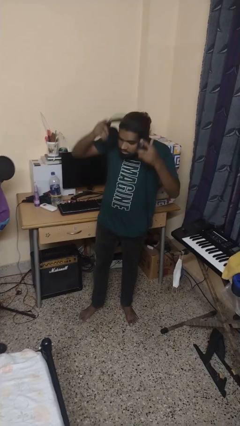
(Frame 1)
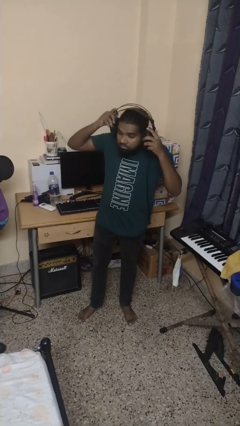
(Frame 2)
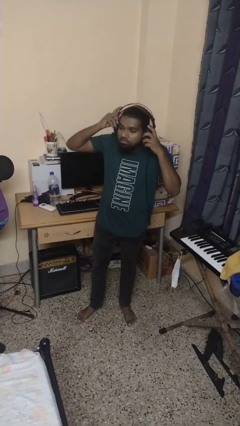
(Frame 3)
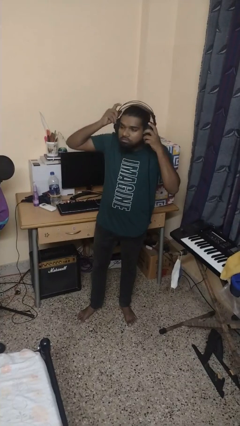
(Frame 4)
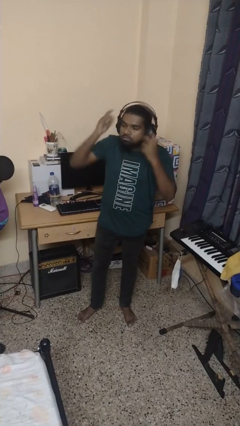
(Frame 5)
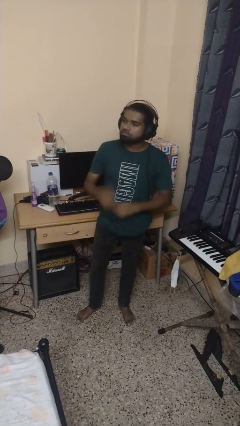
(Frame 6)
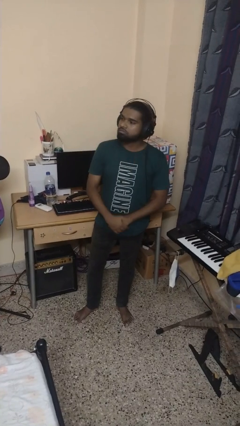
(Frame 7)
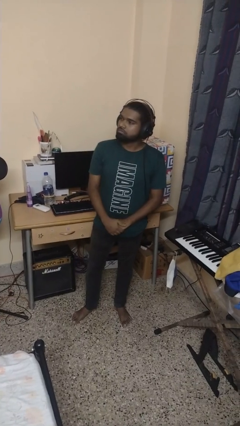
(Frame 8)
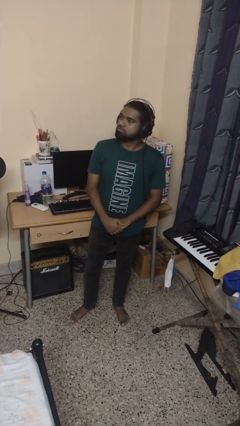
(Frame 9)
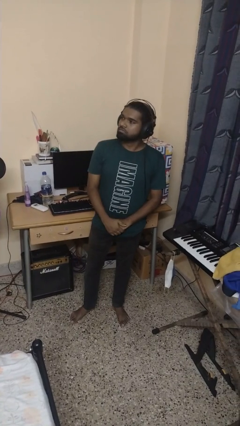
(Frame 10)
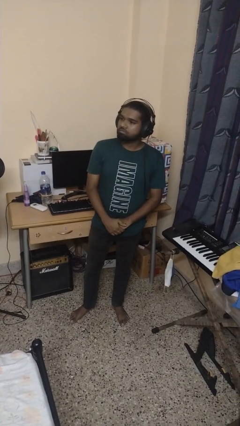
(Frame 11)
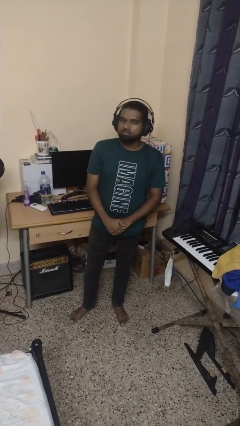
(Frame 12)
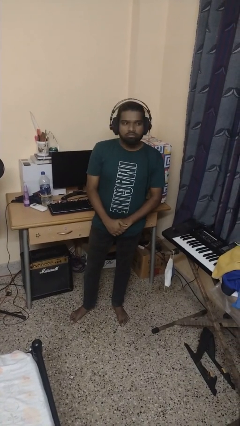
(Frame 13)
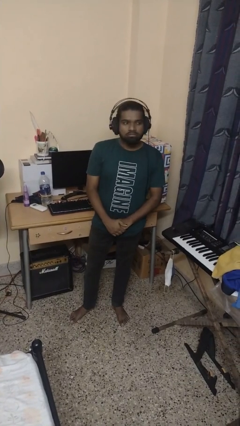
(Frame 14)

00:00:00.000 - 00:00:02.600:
person puts on headphones

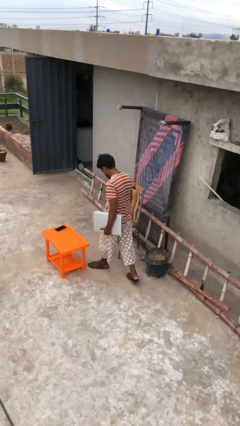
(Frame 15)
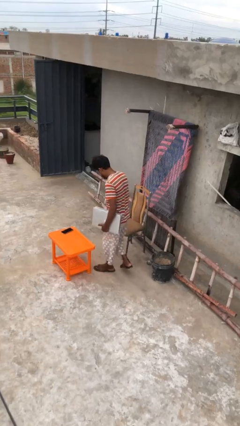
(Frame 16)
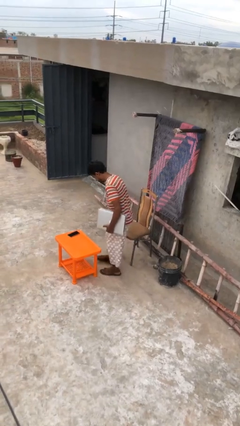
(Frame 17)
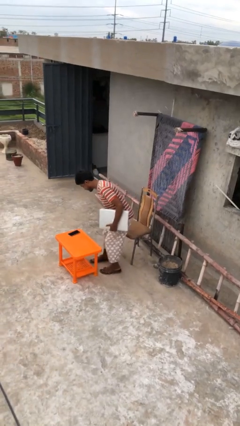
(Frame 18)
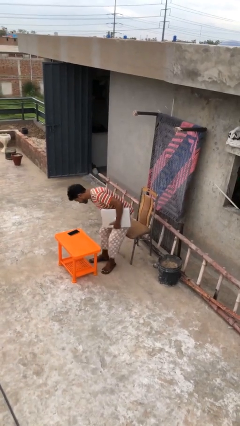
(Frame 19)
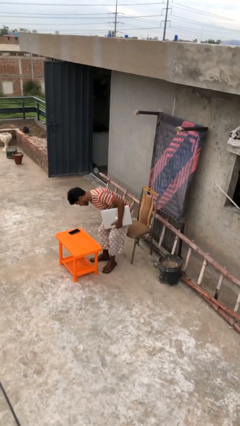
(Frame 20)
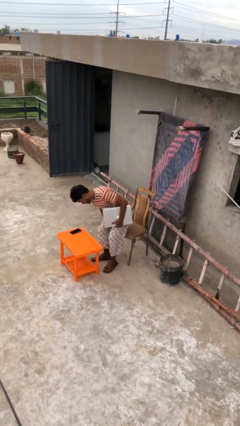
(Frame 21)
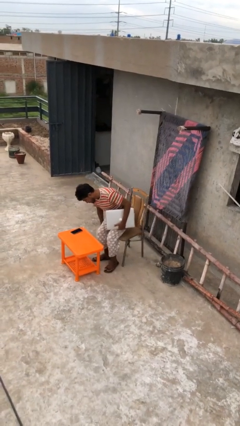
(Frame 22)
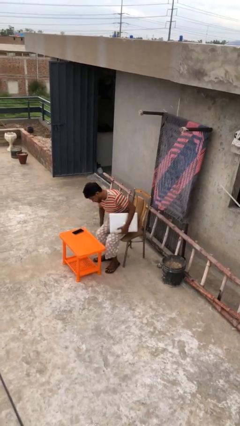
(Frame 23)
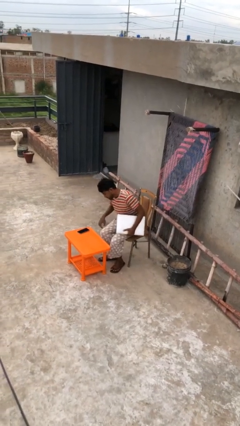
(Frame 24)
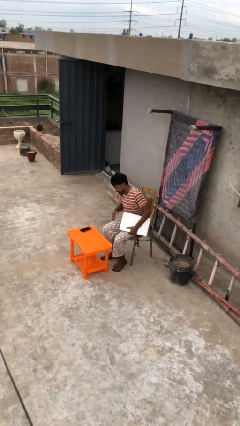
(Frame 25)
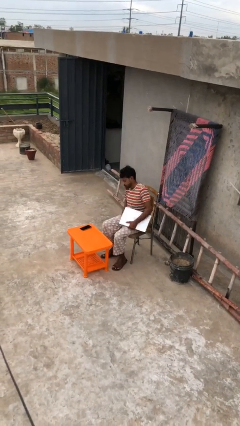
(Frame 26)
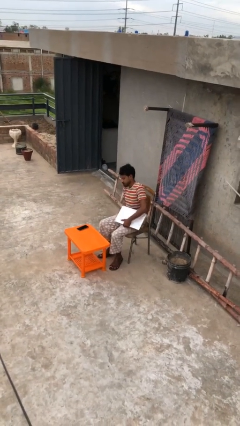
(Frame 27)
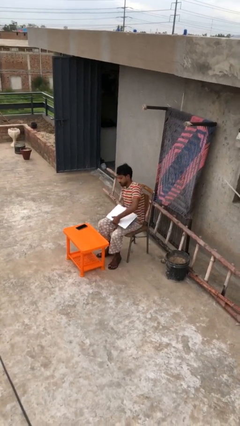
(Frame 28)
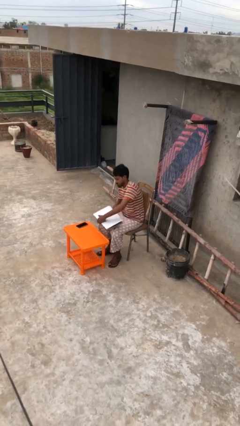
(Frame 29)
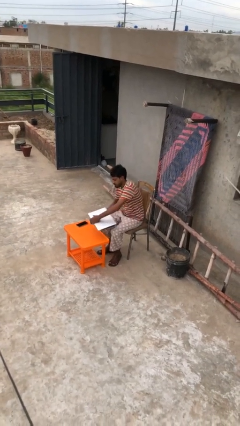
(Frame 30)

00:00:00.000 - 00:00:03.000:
person sits down

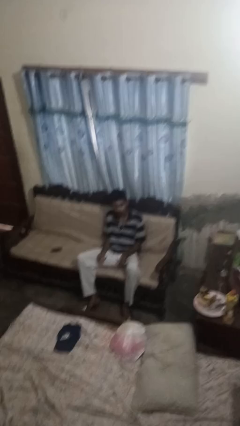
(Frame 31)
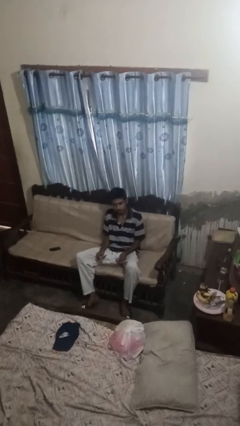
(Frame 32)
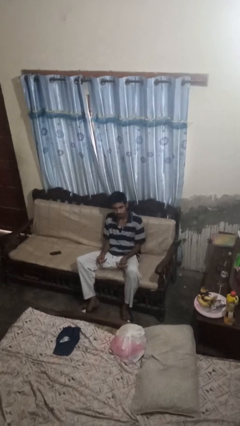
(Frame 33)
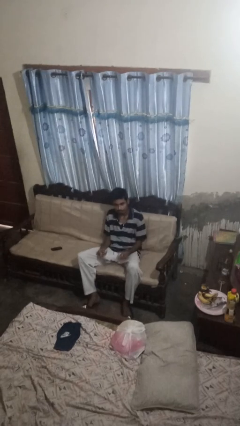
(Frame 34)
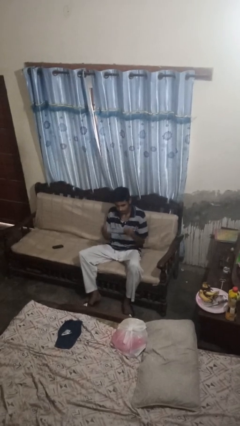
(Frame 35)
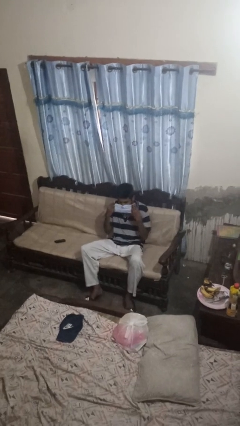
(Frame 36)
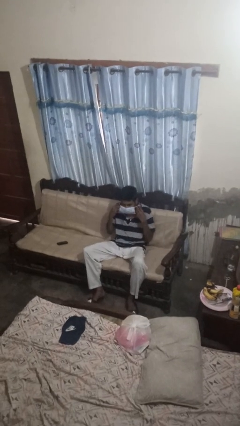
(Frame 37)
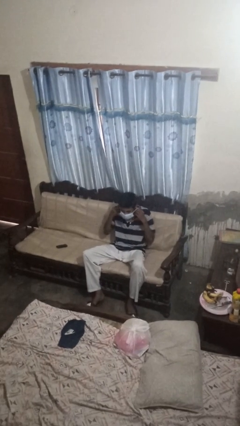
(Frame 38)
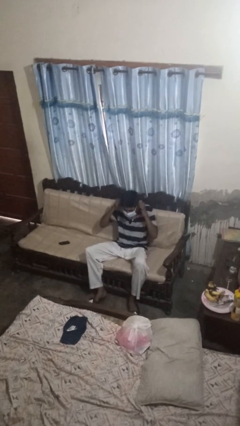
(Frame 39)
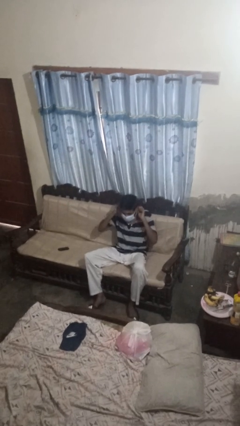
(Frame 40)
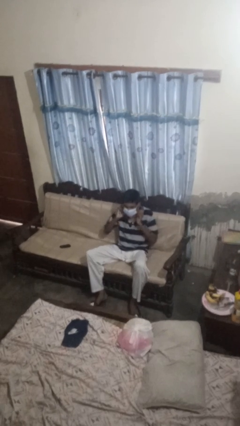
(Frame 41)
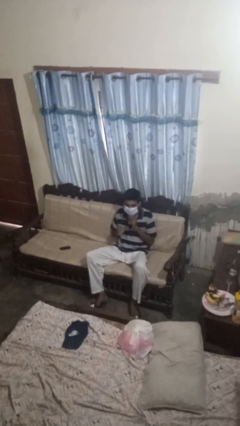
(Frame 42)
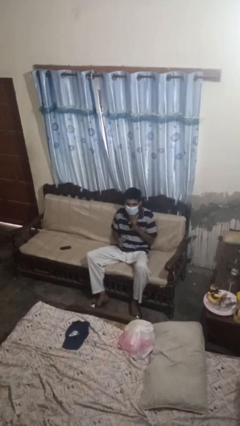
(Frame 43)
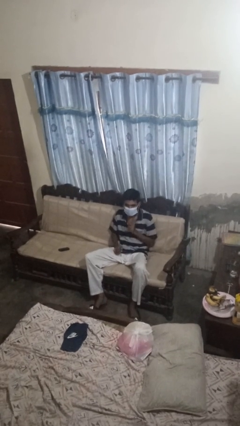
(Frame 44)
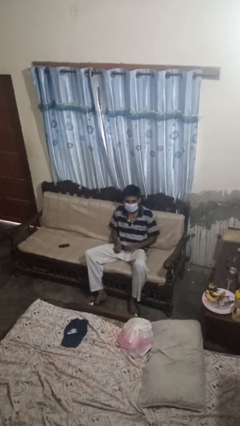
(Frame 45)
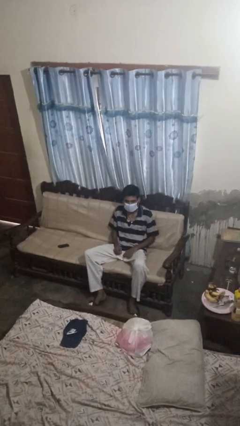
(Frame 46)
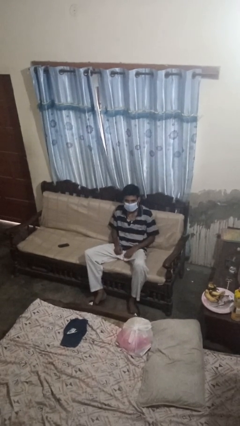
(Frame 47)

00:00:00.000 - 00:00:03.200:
person puts on facemask

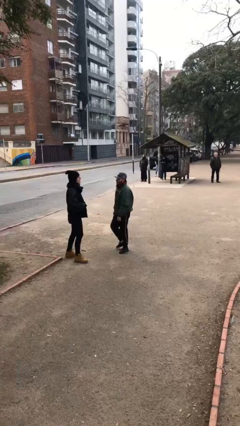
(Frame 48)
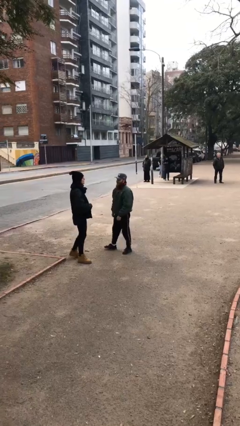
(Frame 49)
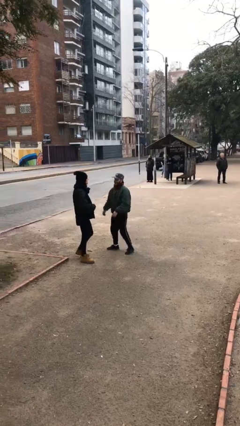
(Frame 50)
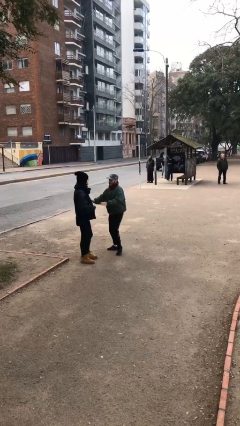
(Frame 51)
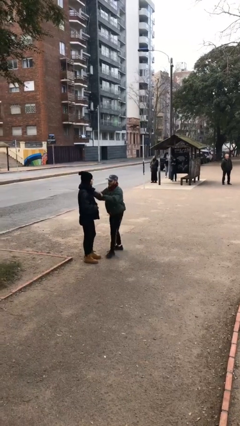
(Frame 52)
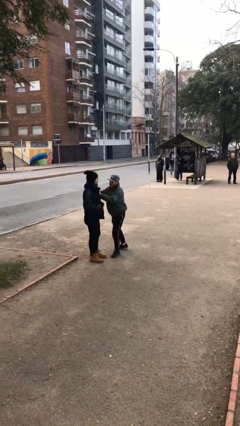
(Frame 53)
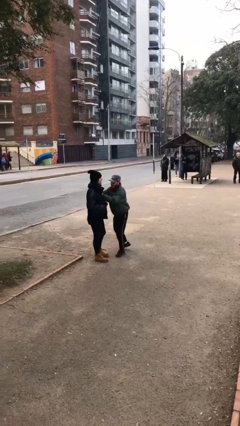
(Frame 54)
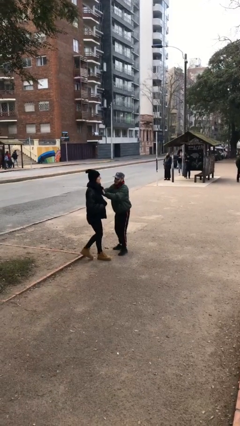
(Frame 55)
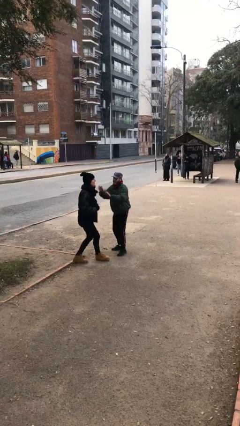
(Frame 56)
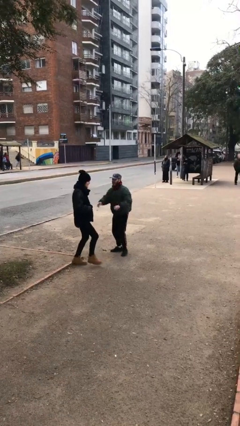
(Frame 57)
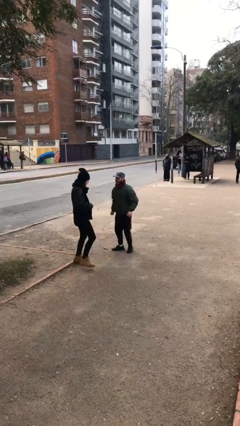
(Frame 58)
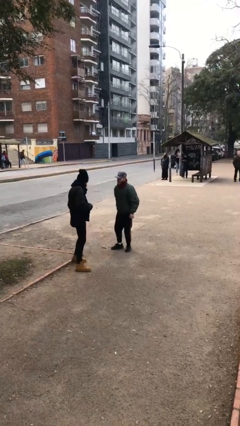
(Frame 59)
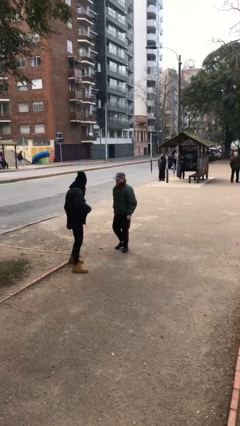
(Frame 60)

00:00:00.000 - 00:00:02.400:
person shoves person

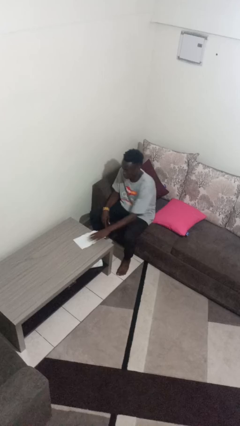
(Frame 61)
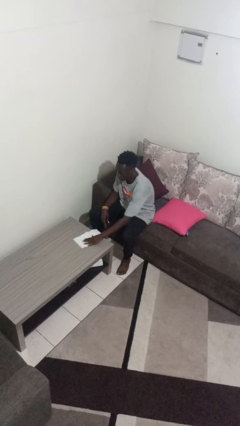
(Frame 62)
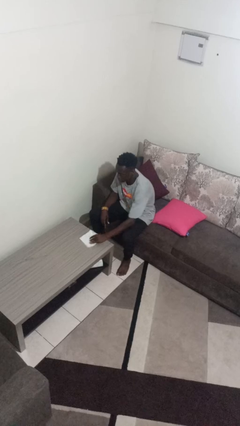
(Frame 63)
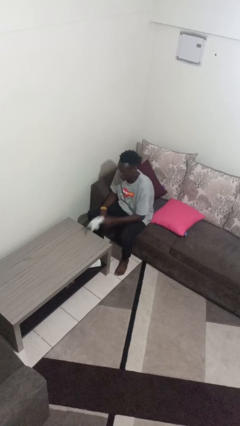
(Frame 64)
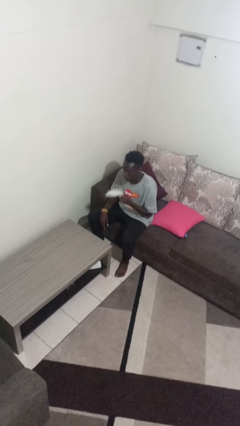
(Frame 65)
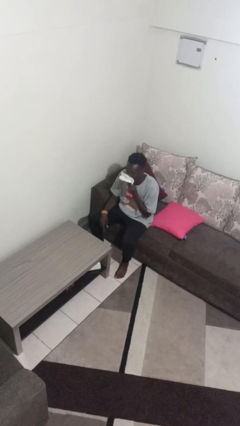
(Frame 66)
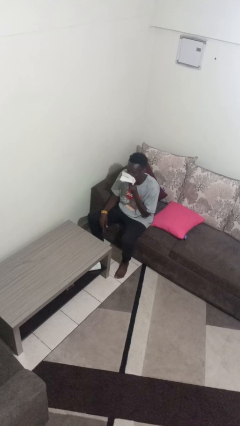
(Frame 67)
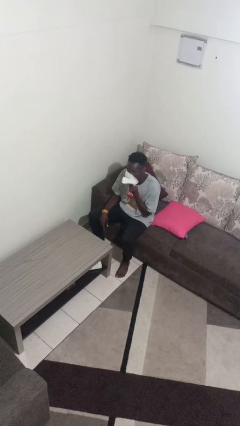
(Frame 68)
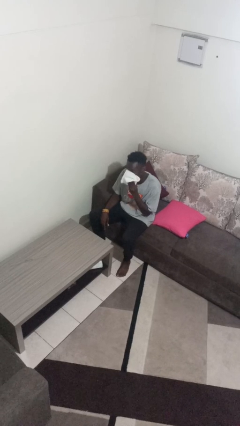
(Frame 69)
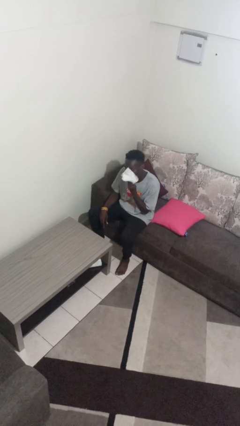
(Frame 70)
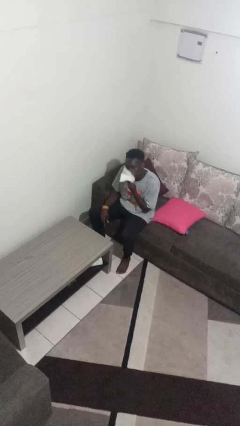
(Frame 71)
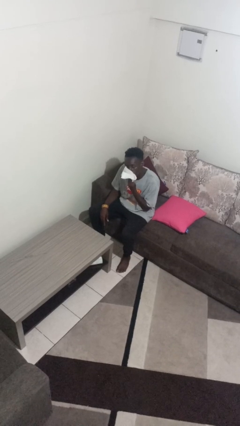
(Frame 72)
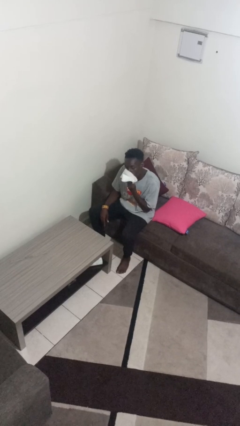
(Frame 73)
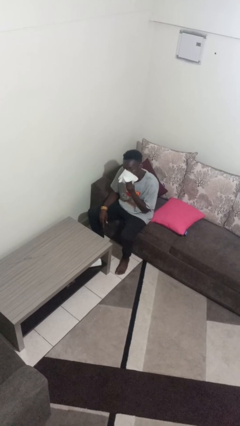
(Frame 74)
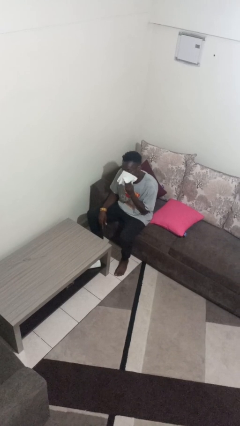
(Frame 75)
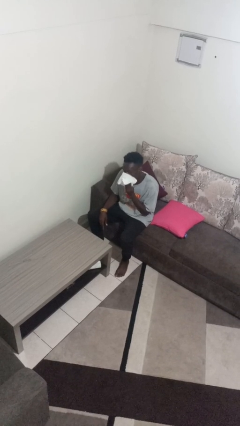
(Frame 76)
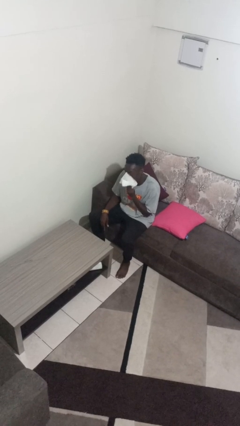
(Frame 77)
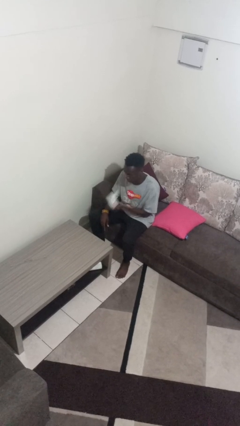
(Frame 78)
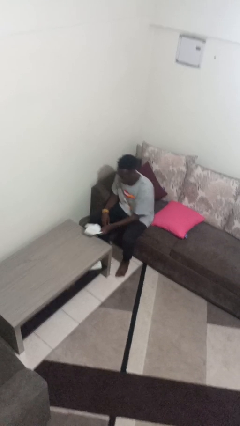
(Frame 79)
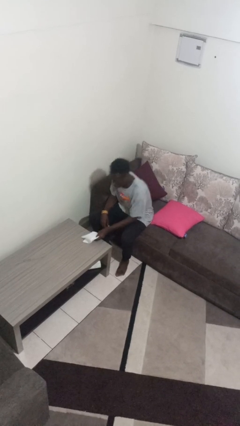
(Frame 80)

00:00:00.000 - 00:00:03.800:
person wipes mouth with napkin

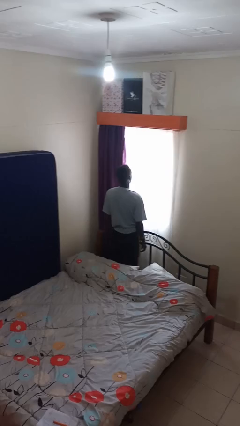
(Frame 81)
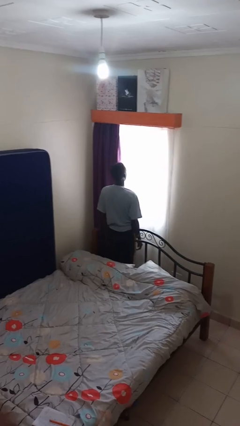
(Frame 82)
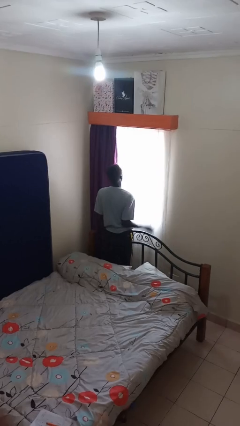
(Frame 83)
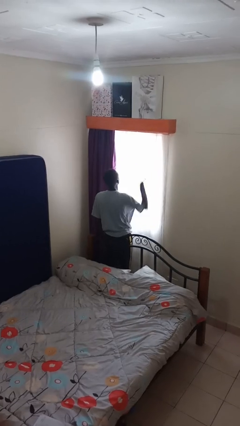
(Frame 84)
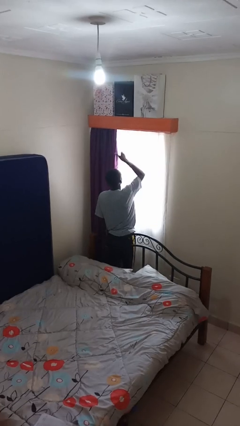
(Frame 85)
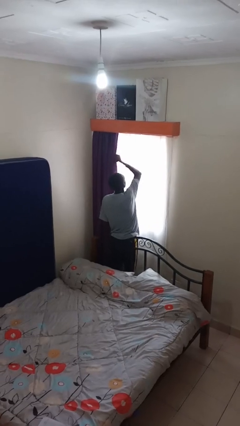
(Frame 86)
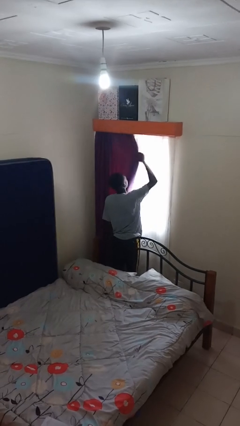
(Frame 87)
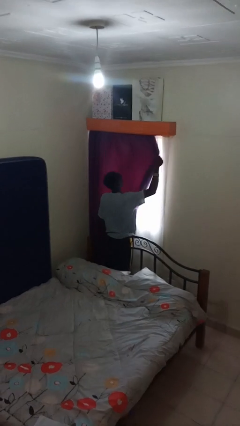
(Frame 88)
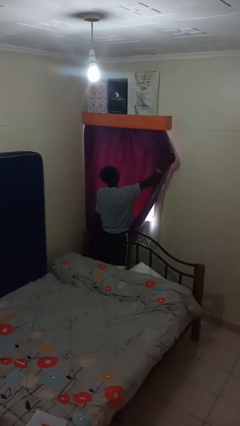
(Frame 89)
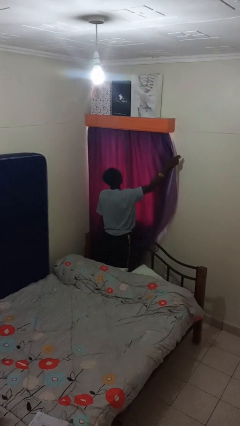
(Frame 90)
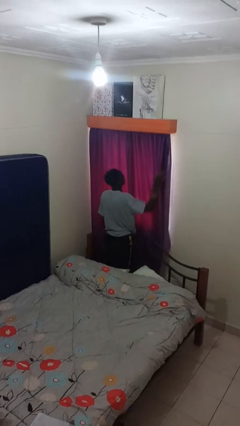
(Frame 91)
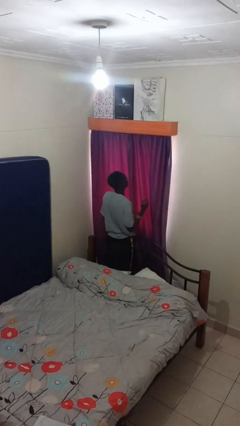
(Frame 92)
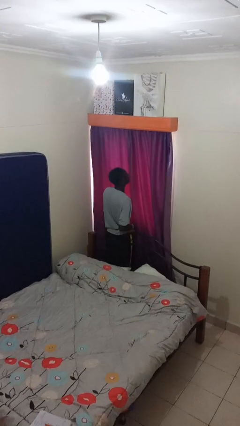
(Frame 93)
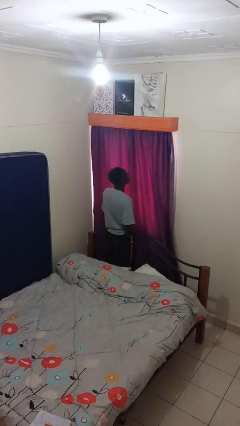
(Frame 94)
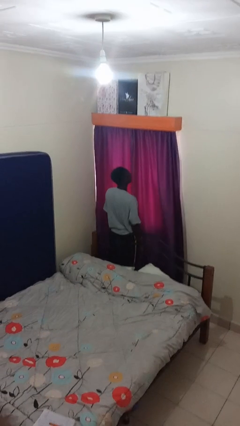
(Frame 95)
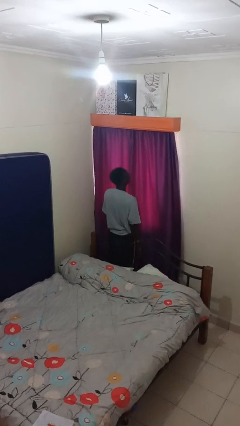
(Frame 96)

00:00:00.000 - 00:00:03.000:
person closes curtains
